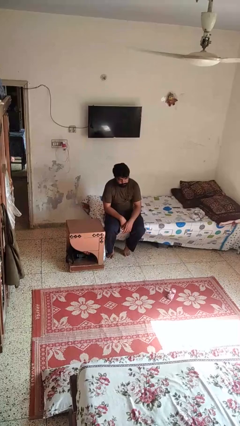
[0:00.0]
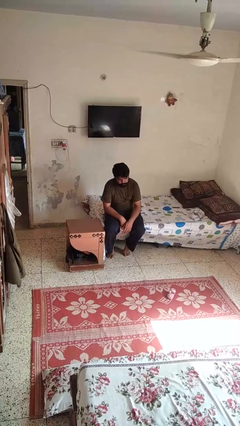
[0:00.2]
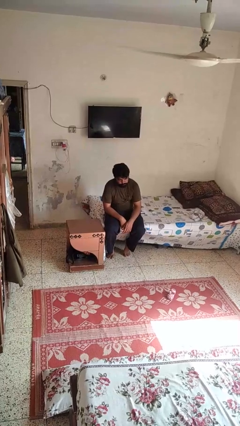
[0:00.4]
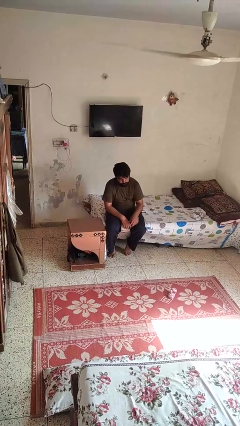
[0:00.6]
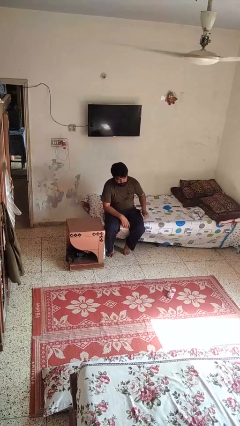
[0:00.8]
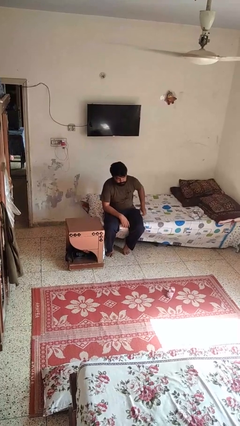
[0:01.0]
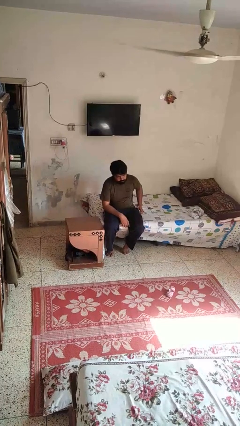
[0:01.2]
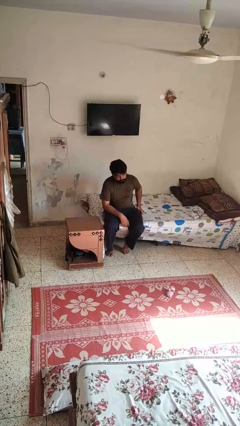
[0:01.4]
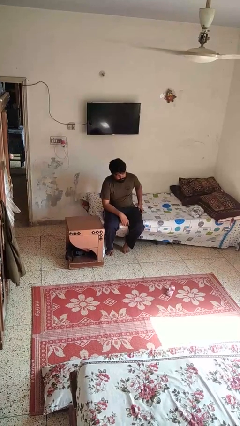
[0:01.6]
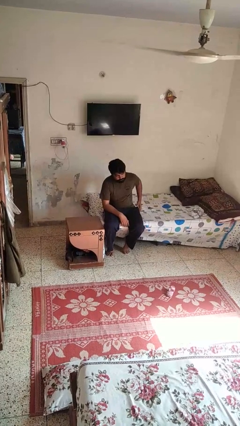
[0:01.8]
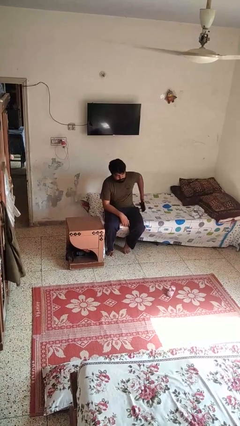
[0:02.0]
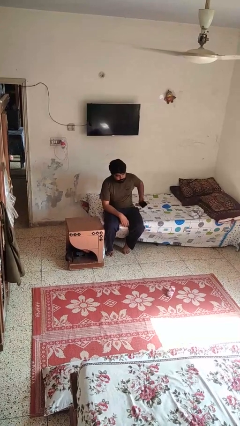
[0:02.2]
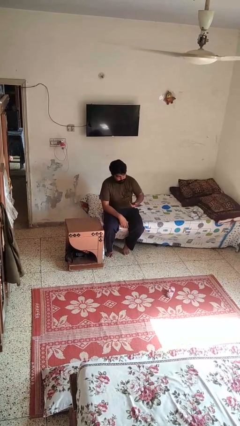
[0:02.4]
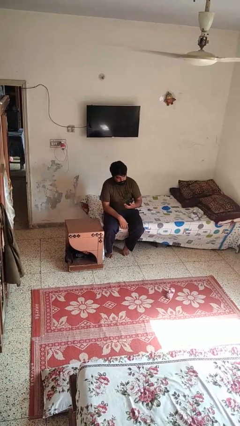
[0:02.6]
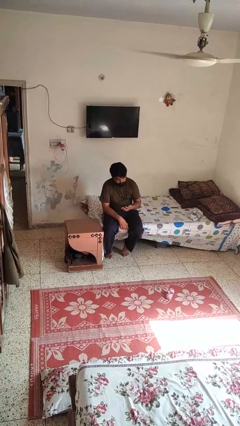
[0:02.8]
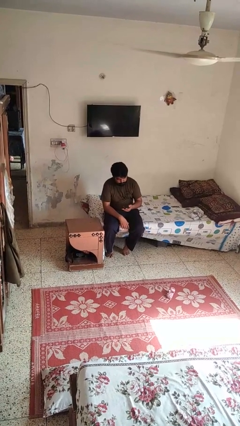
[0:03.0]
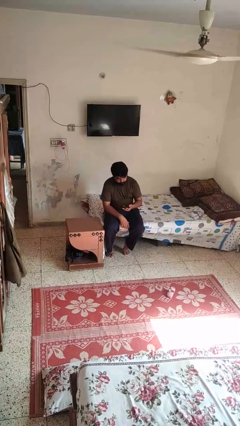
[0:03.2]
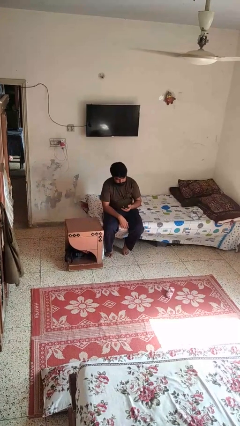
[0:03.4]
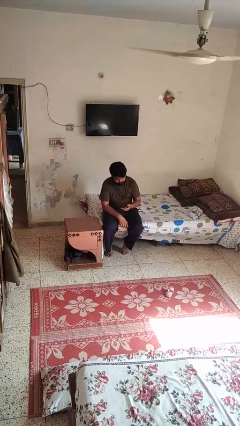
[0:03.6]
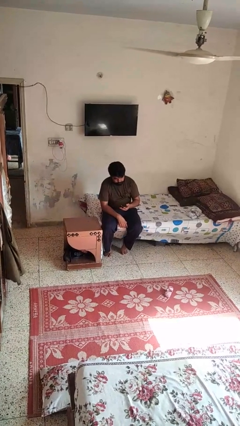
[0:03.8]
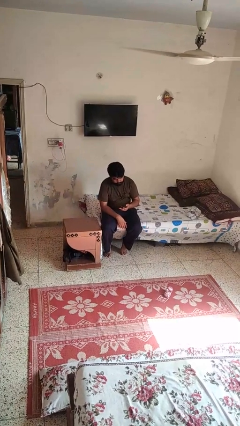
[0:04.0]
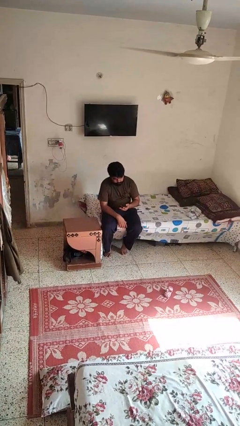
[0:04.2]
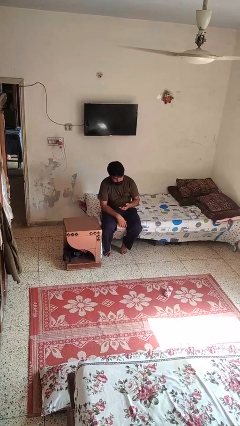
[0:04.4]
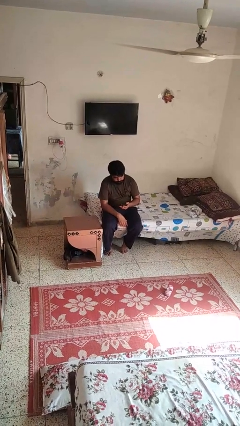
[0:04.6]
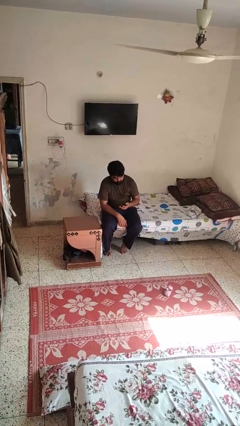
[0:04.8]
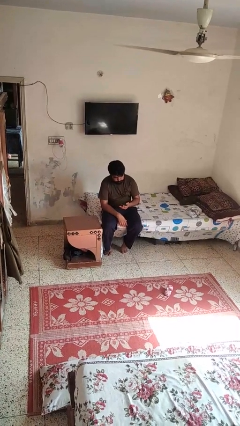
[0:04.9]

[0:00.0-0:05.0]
person takes phone from pocket

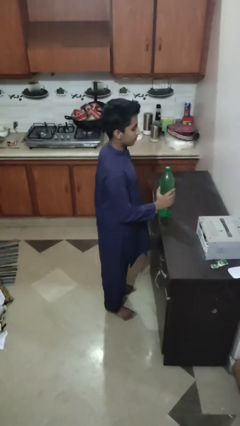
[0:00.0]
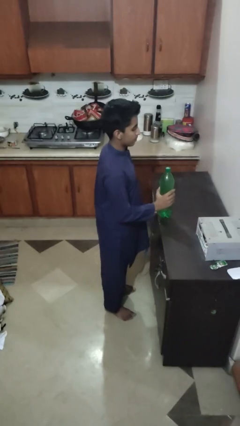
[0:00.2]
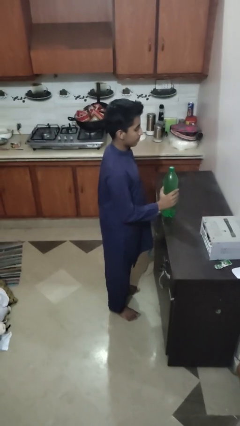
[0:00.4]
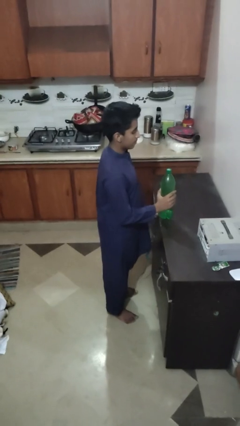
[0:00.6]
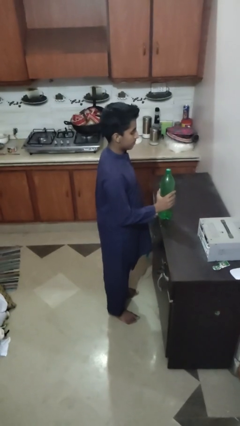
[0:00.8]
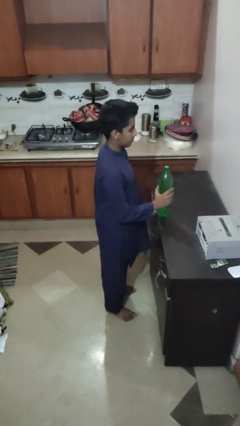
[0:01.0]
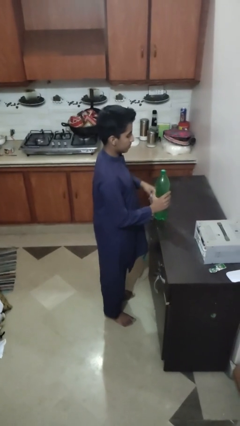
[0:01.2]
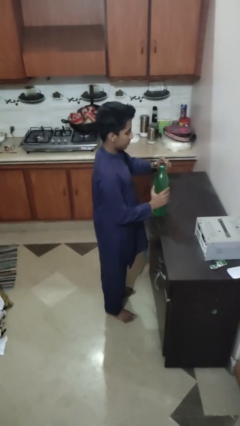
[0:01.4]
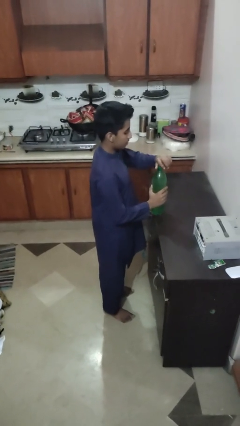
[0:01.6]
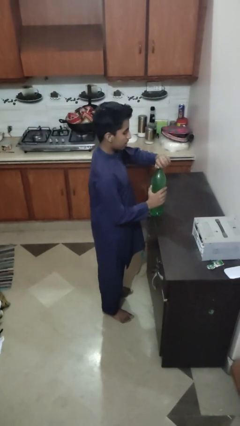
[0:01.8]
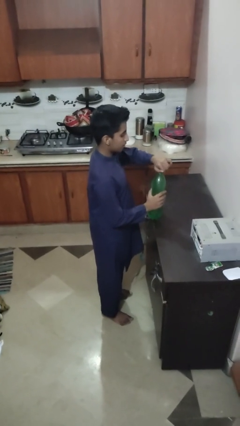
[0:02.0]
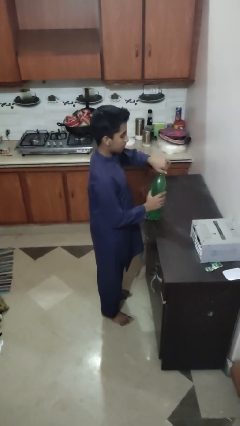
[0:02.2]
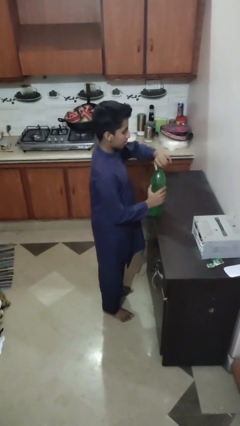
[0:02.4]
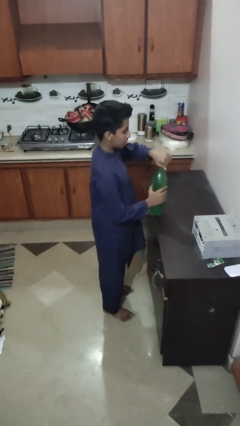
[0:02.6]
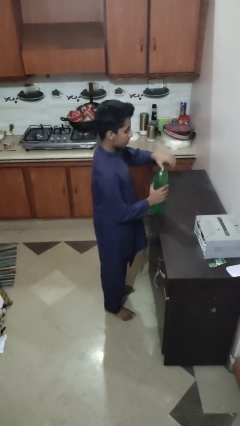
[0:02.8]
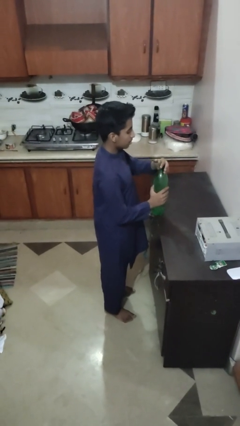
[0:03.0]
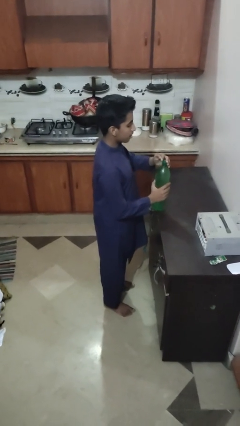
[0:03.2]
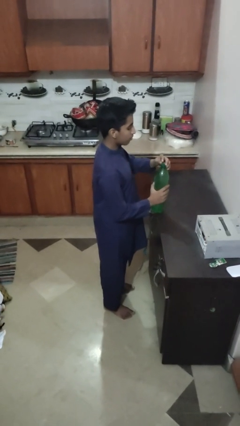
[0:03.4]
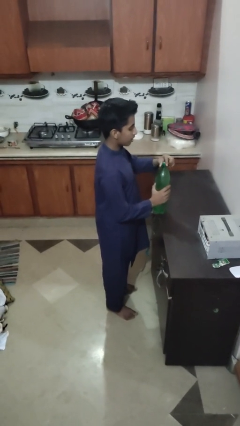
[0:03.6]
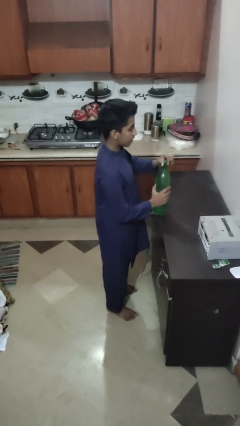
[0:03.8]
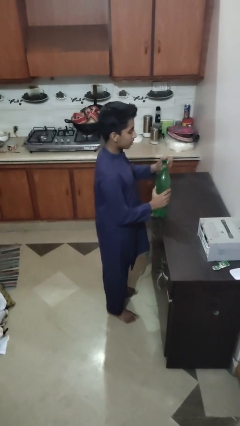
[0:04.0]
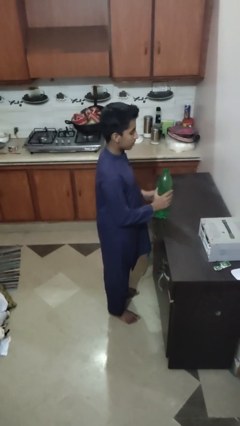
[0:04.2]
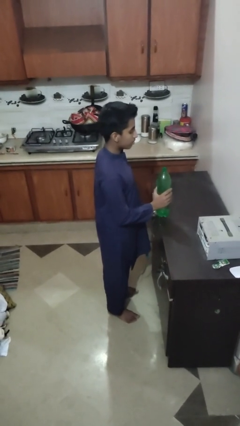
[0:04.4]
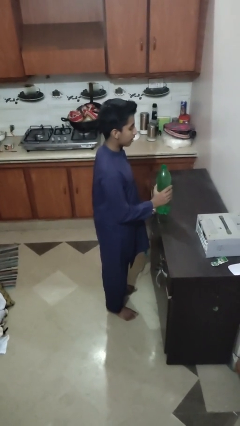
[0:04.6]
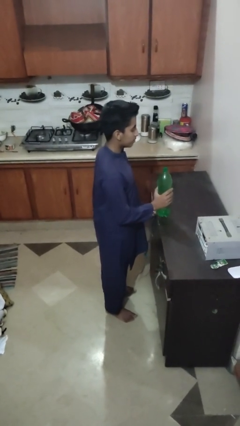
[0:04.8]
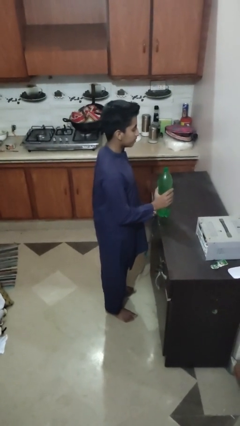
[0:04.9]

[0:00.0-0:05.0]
person unscrews lid from bottle

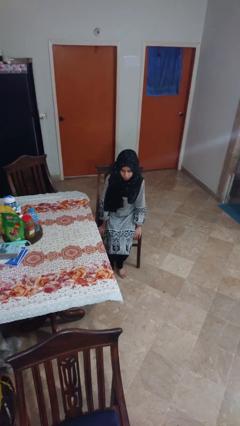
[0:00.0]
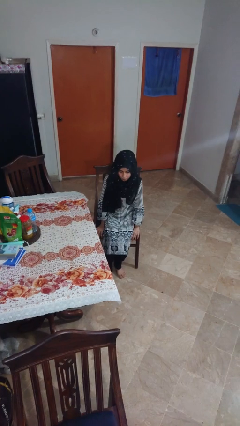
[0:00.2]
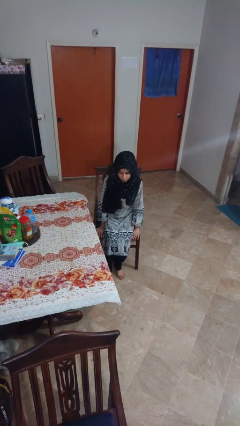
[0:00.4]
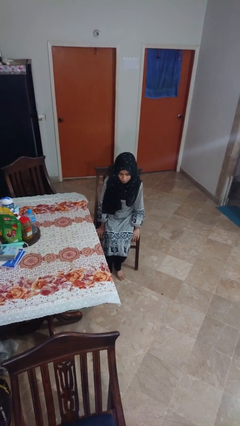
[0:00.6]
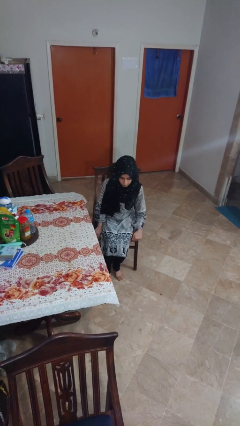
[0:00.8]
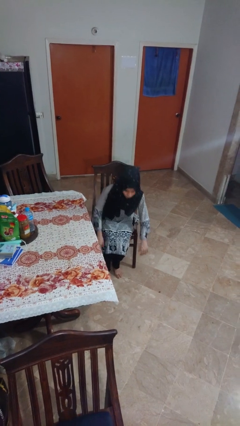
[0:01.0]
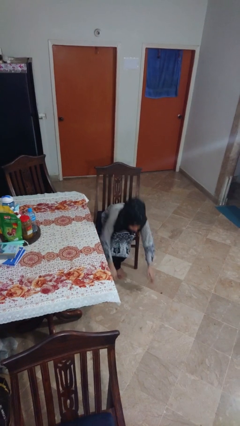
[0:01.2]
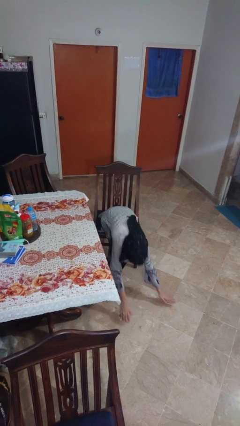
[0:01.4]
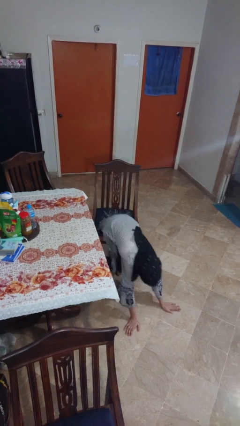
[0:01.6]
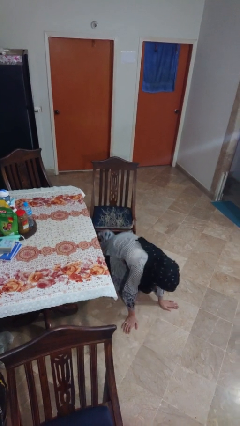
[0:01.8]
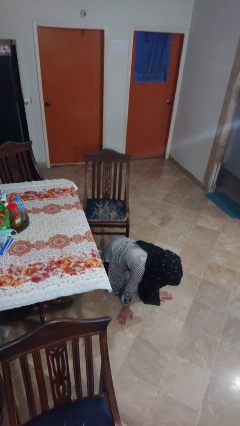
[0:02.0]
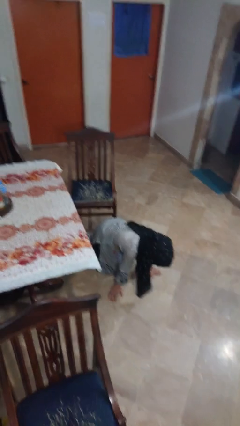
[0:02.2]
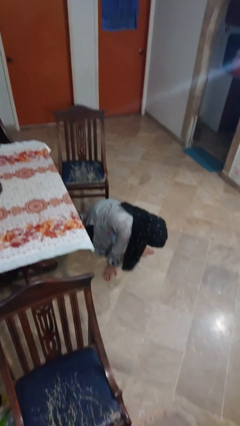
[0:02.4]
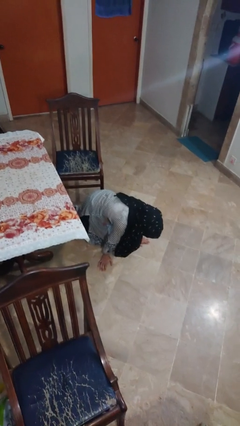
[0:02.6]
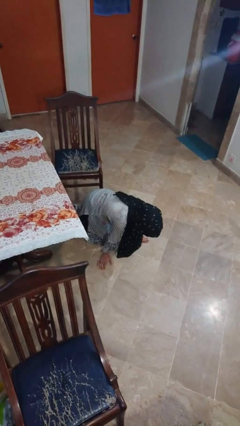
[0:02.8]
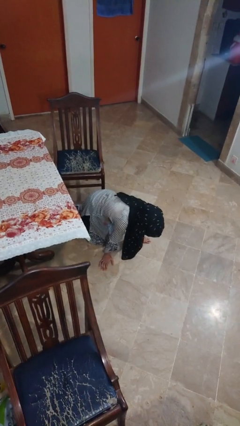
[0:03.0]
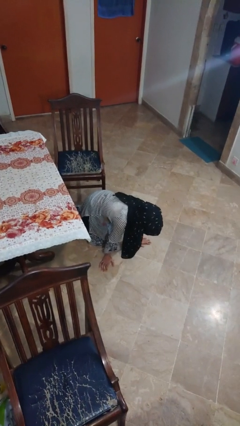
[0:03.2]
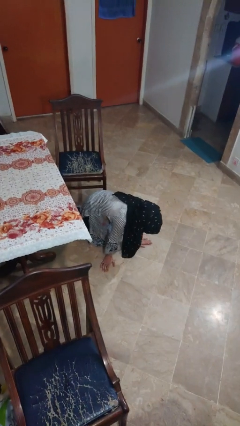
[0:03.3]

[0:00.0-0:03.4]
person falls from chair

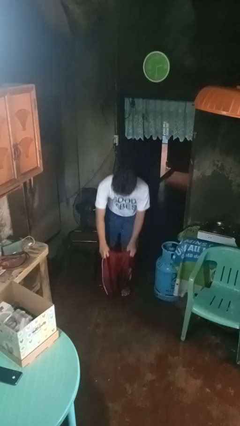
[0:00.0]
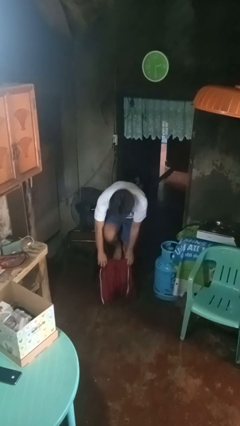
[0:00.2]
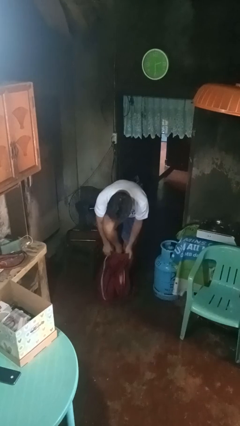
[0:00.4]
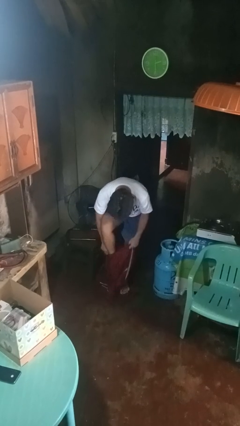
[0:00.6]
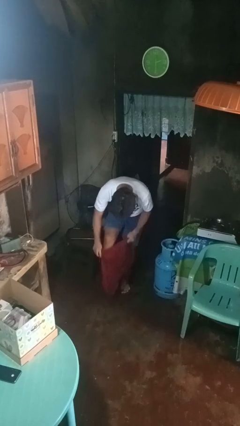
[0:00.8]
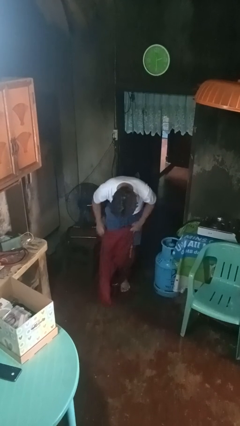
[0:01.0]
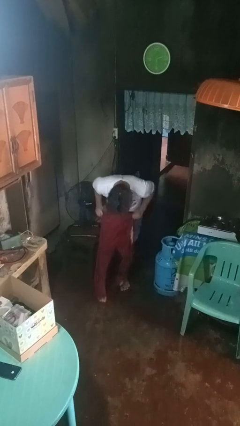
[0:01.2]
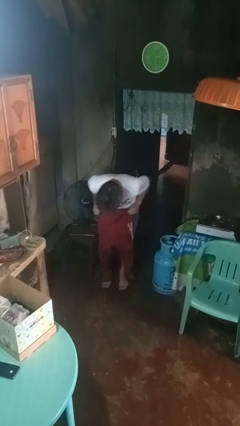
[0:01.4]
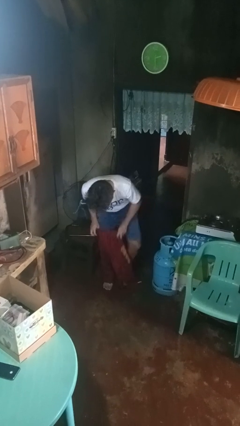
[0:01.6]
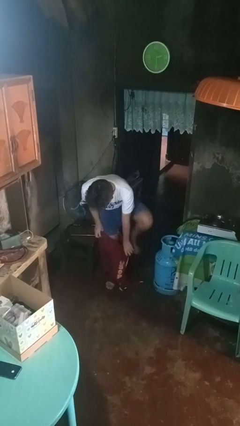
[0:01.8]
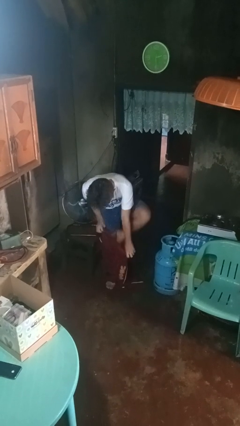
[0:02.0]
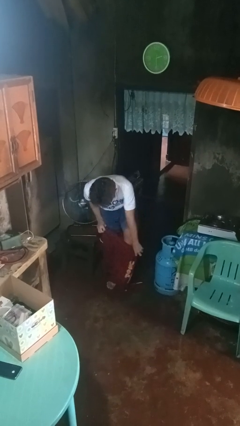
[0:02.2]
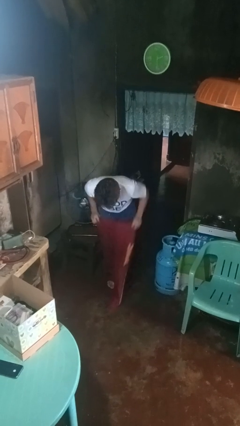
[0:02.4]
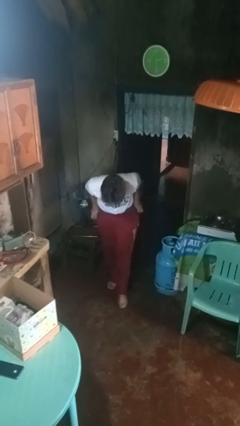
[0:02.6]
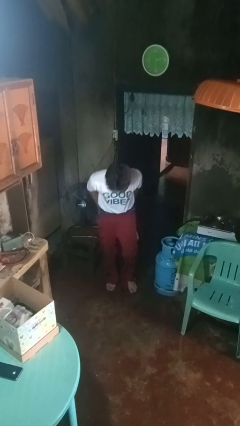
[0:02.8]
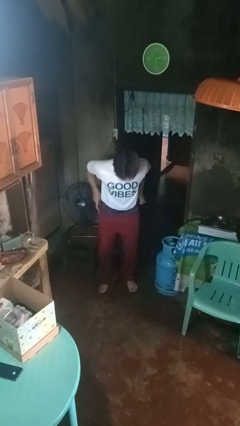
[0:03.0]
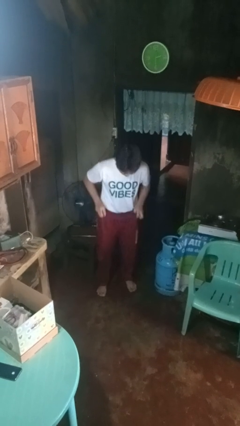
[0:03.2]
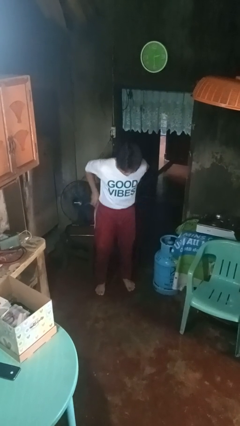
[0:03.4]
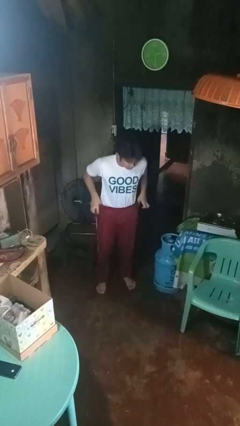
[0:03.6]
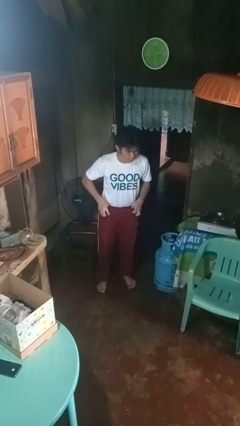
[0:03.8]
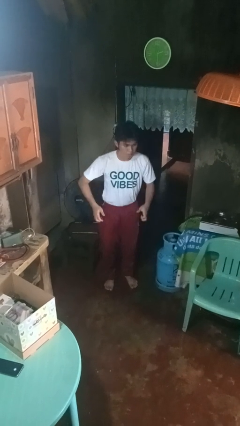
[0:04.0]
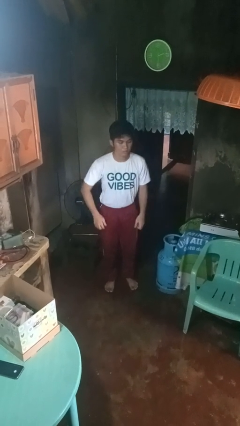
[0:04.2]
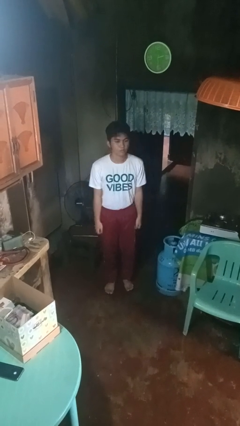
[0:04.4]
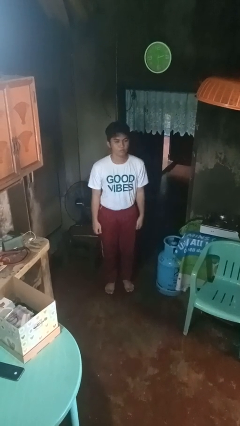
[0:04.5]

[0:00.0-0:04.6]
person puts on pants
